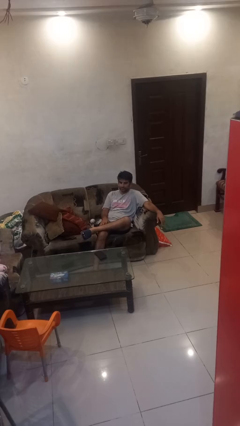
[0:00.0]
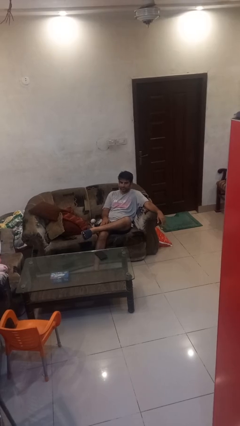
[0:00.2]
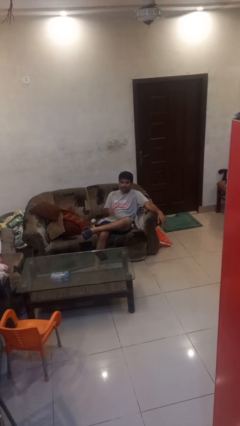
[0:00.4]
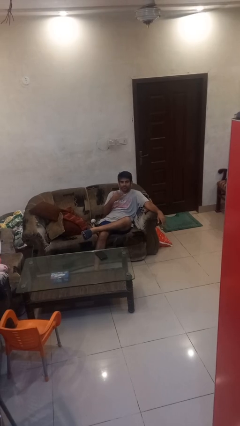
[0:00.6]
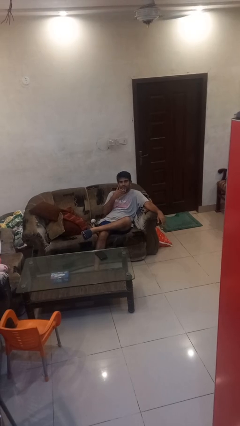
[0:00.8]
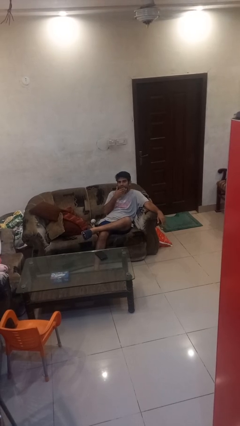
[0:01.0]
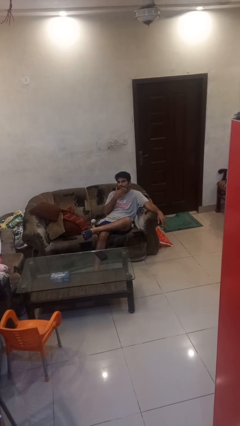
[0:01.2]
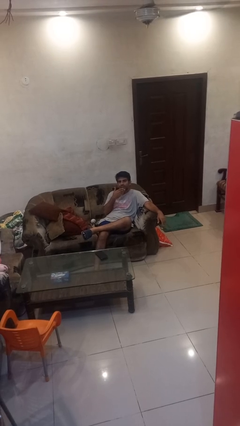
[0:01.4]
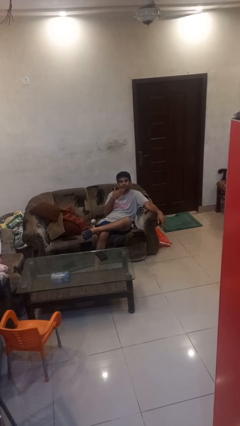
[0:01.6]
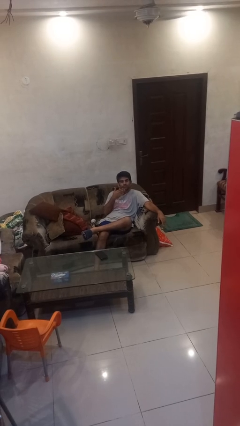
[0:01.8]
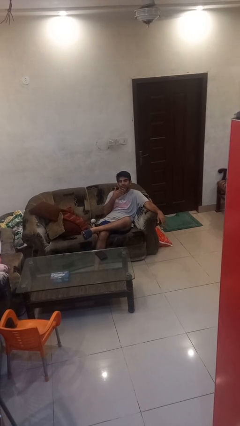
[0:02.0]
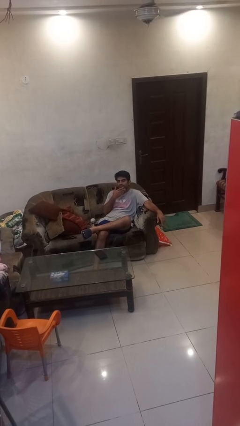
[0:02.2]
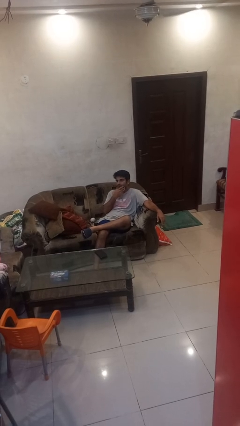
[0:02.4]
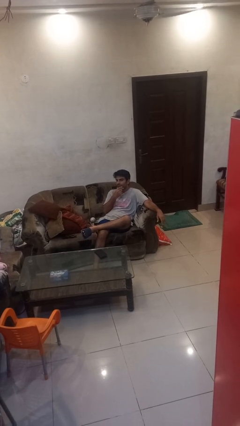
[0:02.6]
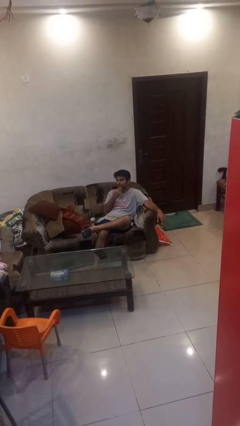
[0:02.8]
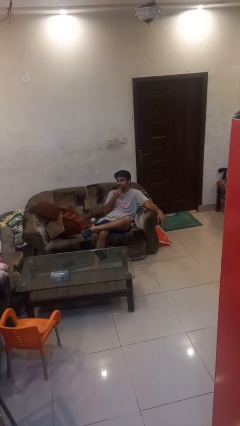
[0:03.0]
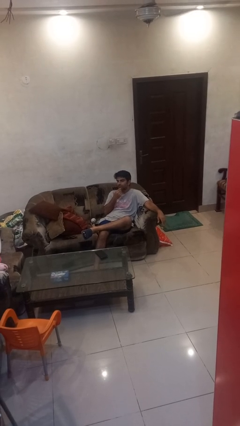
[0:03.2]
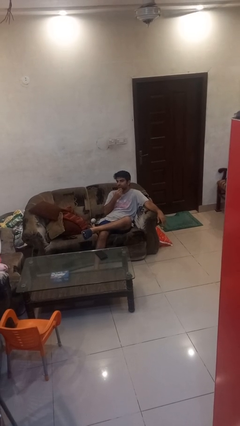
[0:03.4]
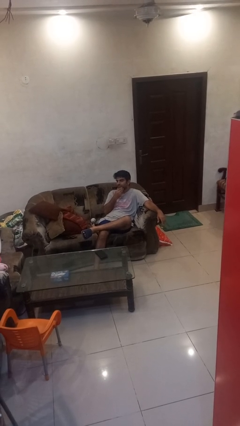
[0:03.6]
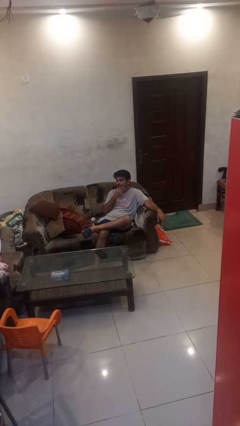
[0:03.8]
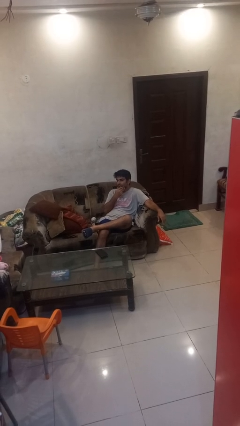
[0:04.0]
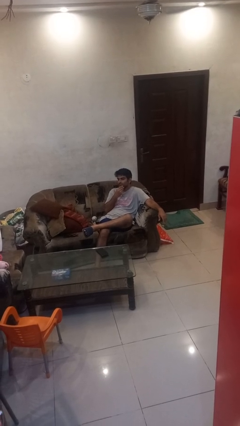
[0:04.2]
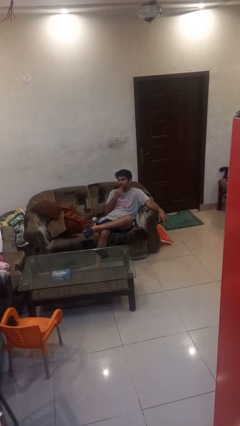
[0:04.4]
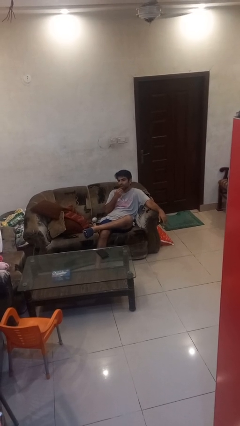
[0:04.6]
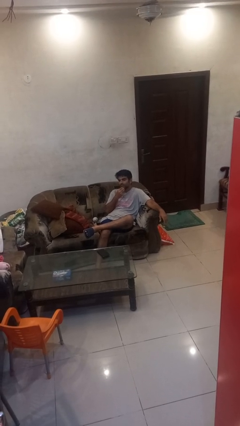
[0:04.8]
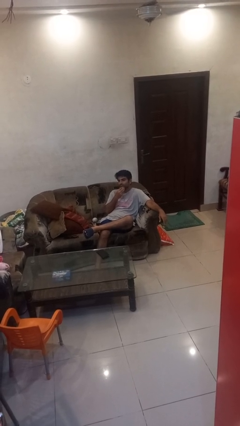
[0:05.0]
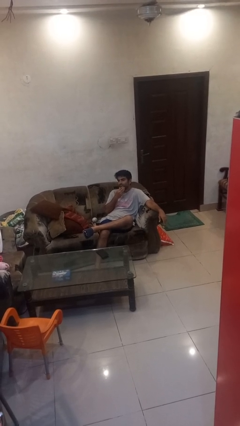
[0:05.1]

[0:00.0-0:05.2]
person strokes chin

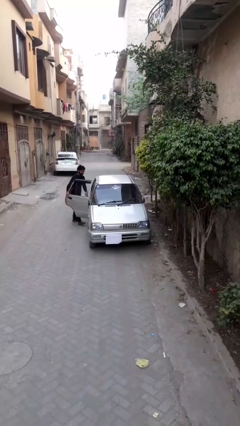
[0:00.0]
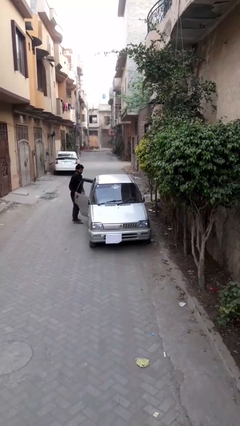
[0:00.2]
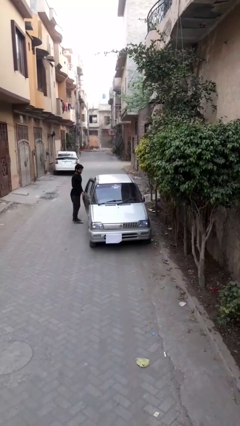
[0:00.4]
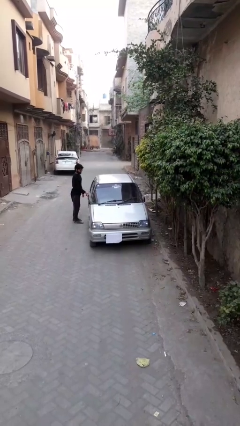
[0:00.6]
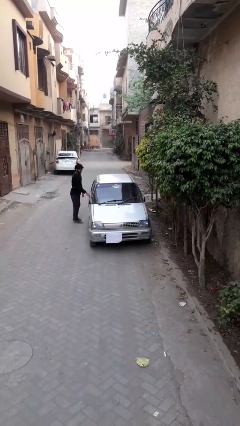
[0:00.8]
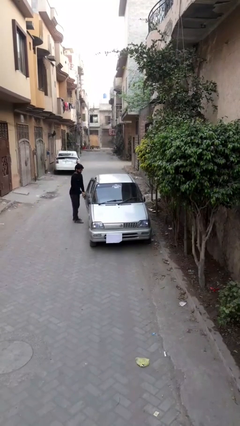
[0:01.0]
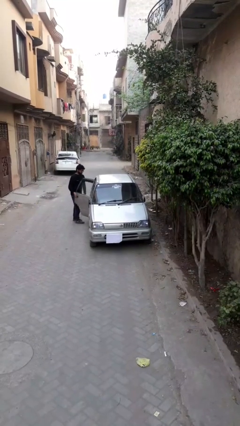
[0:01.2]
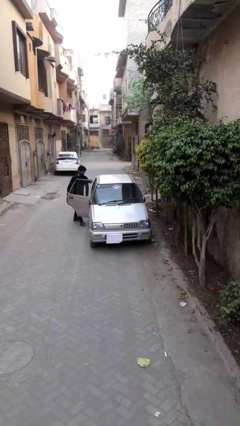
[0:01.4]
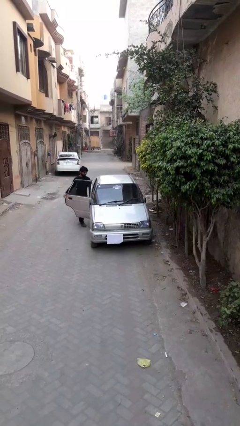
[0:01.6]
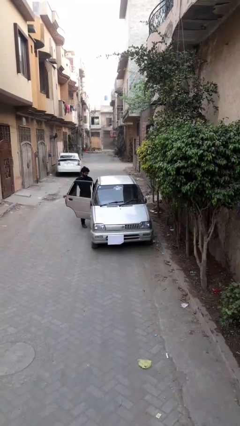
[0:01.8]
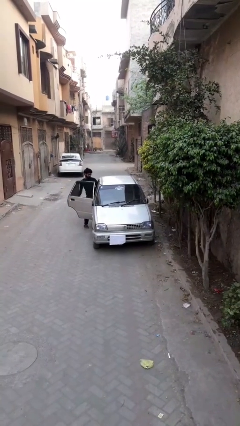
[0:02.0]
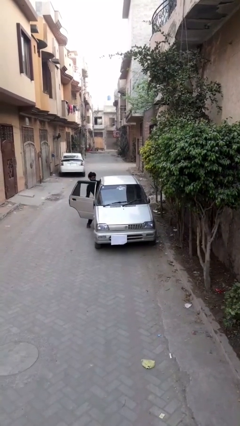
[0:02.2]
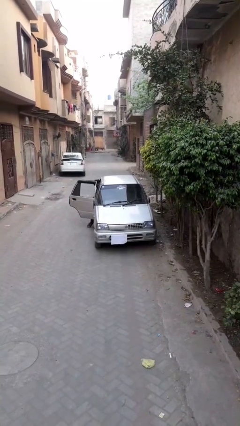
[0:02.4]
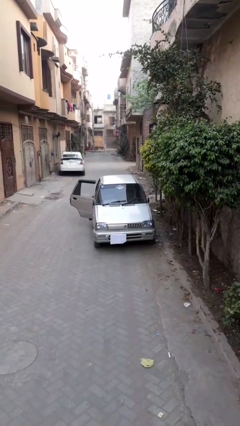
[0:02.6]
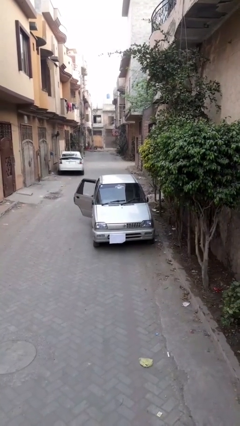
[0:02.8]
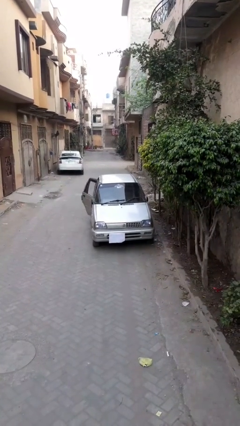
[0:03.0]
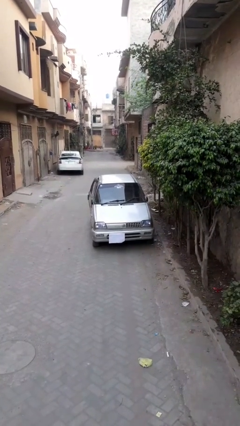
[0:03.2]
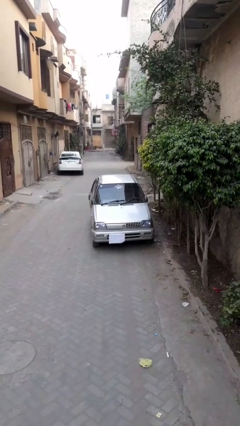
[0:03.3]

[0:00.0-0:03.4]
car picks up person

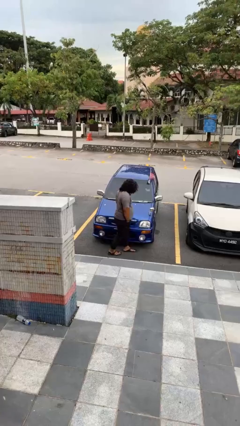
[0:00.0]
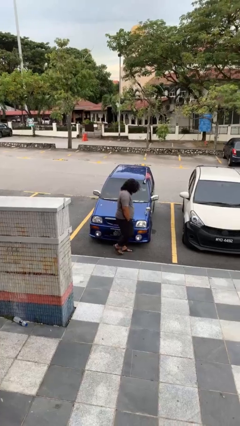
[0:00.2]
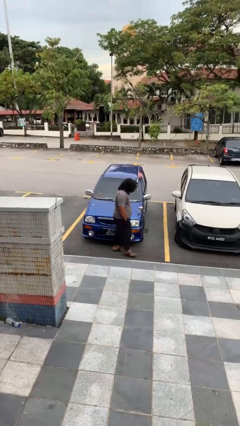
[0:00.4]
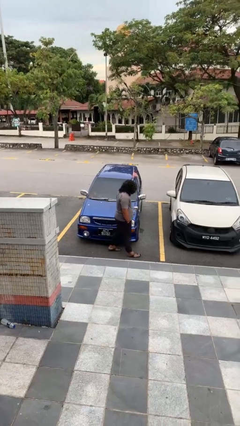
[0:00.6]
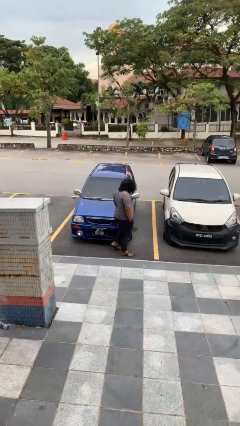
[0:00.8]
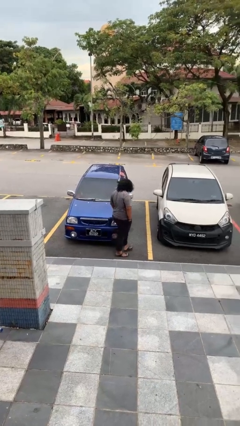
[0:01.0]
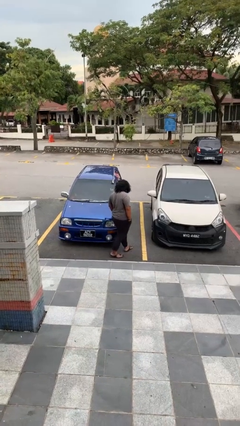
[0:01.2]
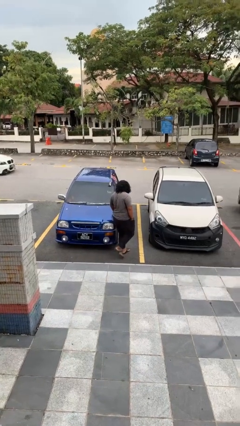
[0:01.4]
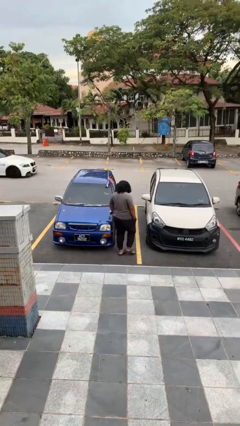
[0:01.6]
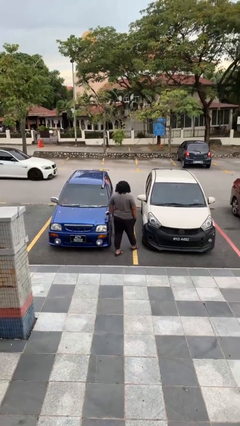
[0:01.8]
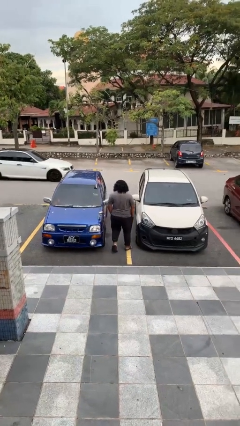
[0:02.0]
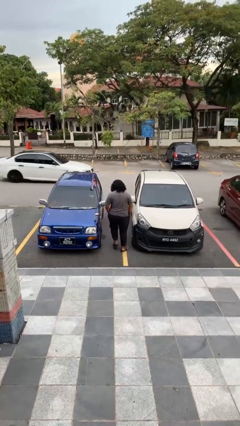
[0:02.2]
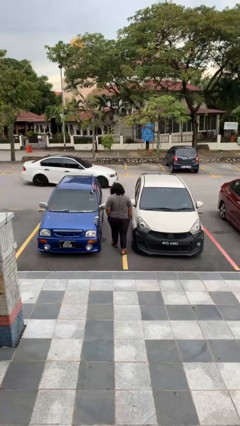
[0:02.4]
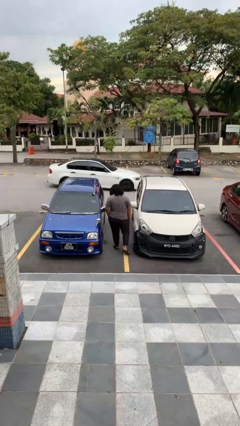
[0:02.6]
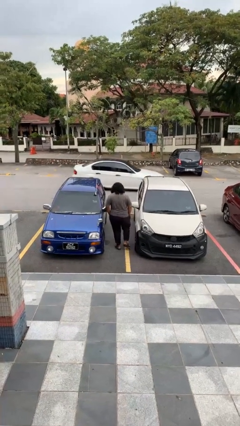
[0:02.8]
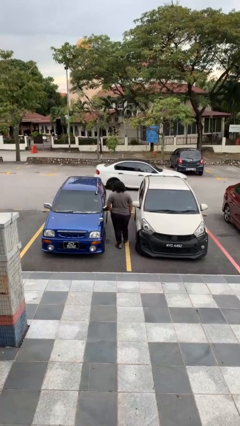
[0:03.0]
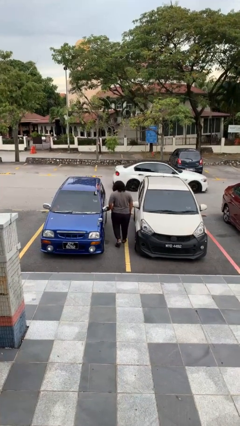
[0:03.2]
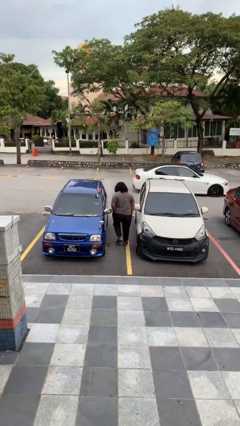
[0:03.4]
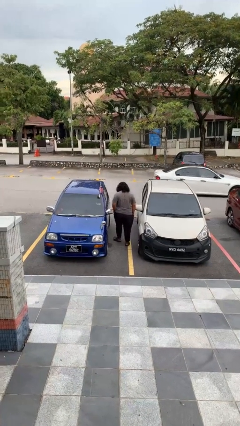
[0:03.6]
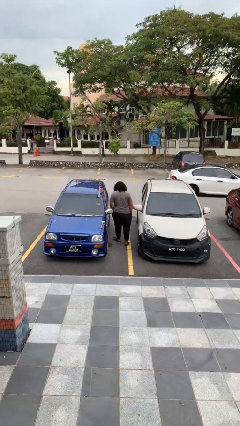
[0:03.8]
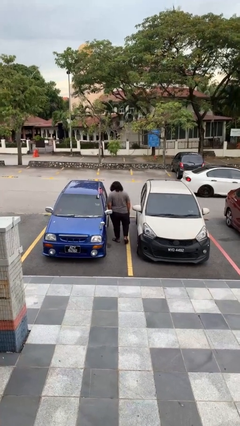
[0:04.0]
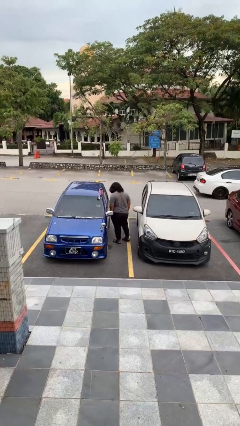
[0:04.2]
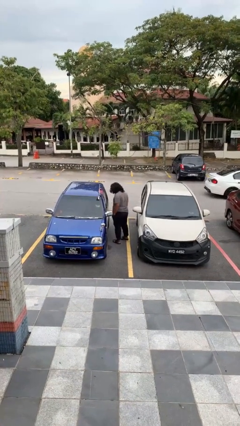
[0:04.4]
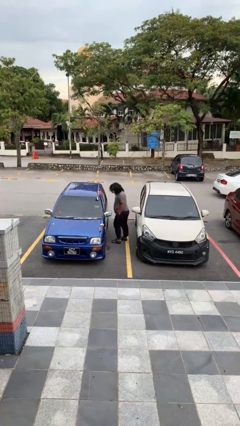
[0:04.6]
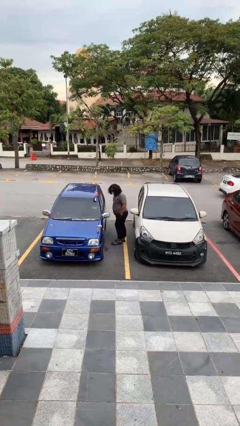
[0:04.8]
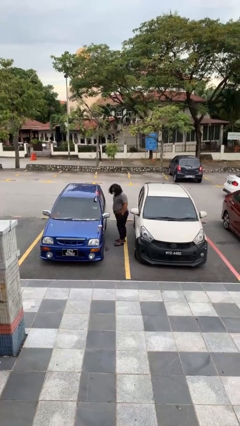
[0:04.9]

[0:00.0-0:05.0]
person walks around car

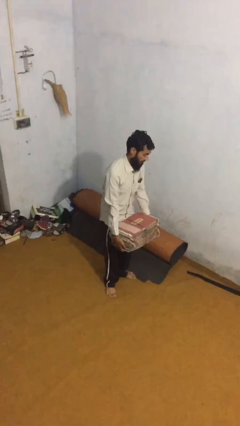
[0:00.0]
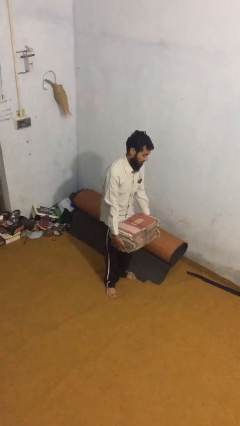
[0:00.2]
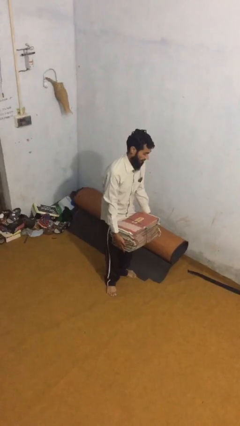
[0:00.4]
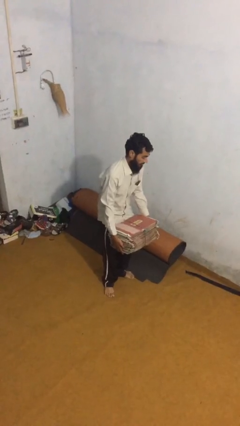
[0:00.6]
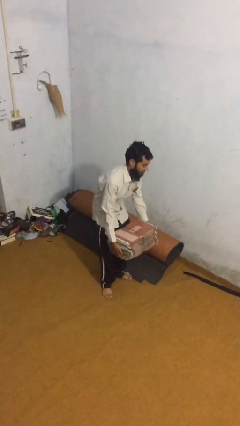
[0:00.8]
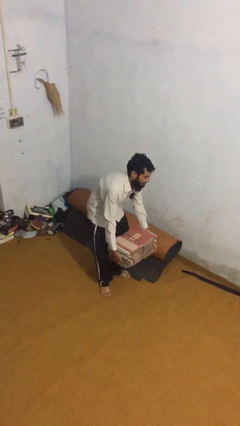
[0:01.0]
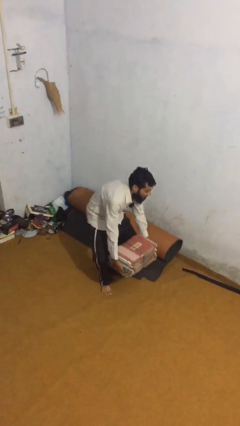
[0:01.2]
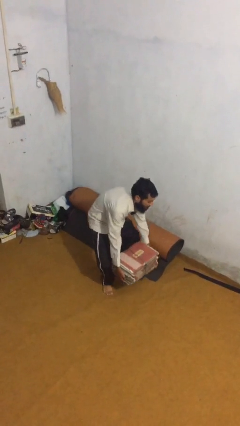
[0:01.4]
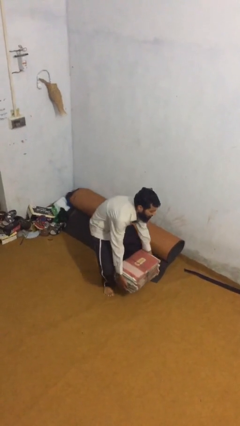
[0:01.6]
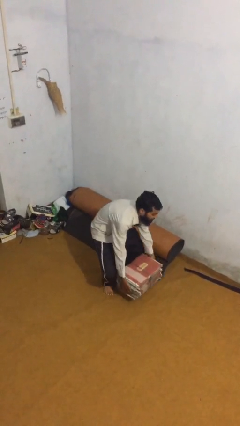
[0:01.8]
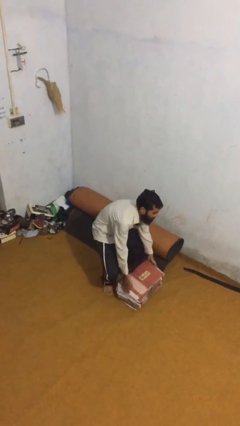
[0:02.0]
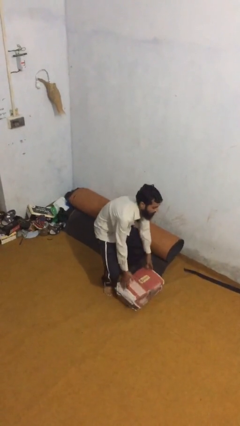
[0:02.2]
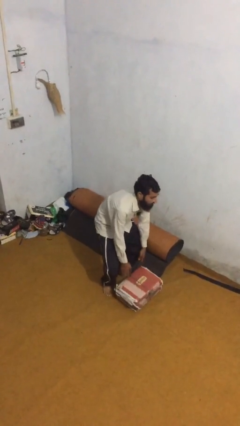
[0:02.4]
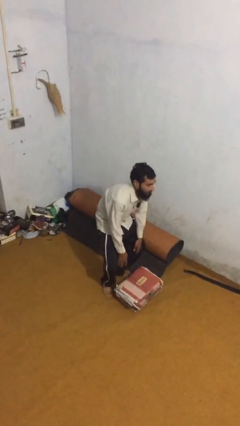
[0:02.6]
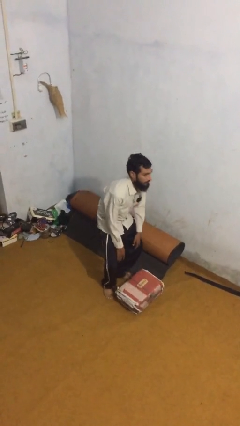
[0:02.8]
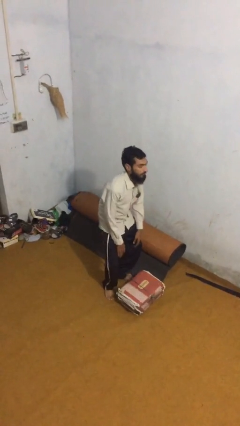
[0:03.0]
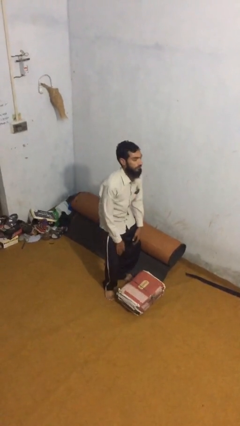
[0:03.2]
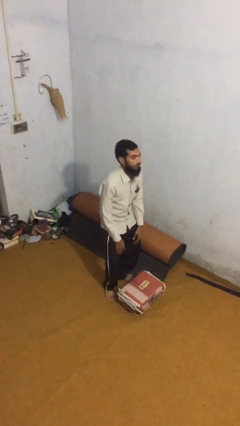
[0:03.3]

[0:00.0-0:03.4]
person puts down object on floor

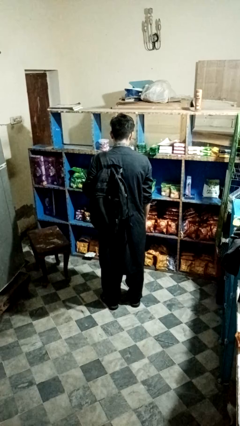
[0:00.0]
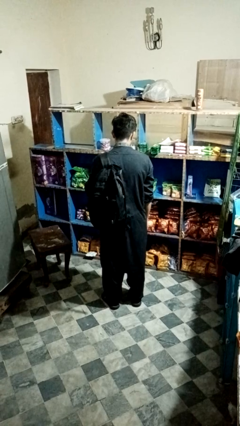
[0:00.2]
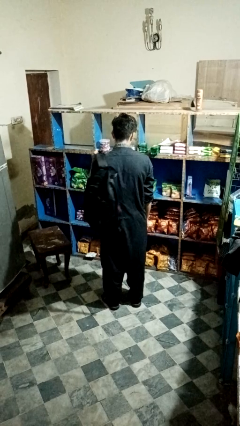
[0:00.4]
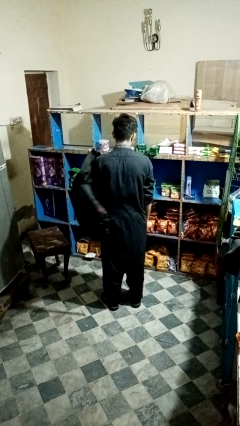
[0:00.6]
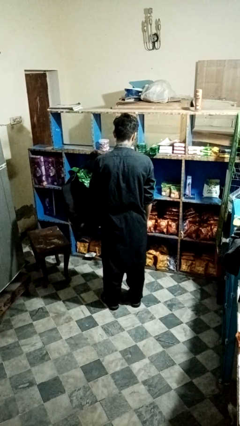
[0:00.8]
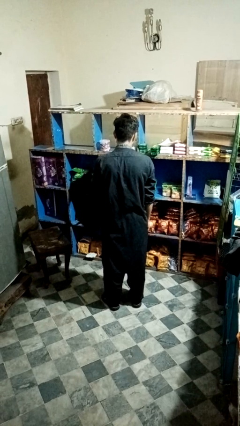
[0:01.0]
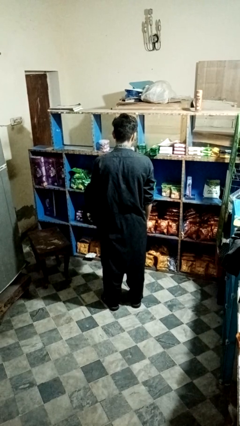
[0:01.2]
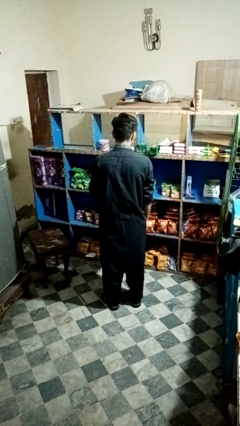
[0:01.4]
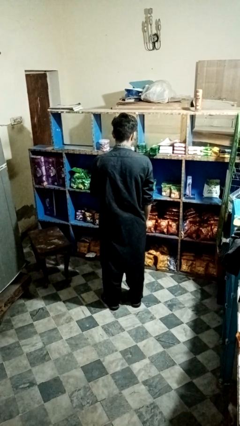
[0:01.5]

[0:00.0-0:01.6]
person takes off backpack
